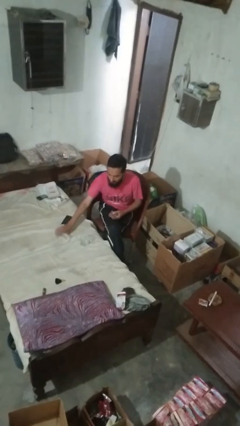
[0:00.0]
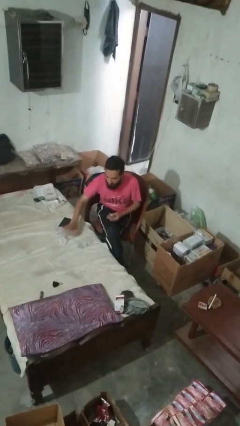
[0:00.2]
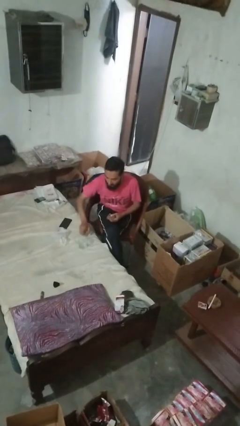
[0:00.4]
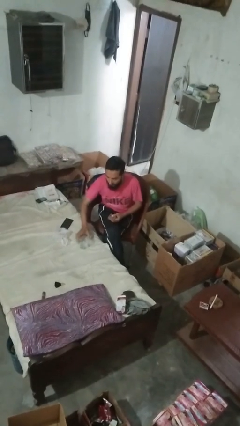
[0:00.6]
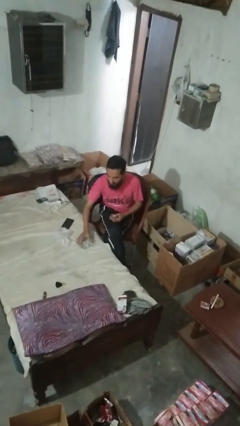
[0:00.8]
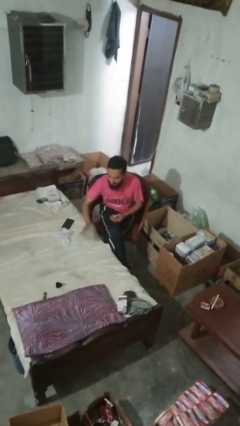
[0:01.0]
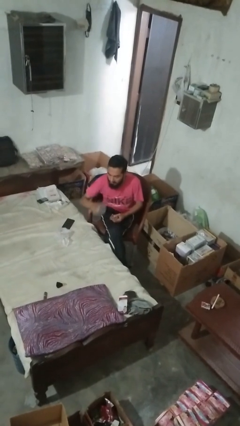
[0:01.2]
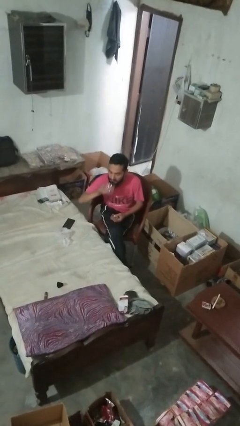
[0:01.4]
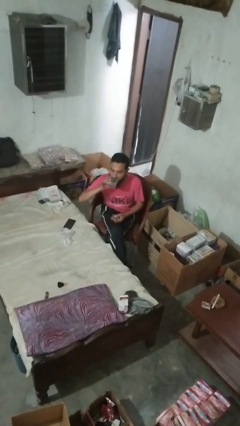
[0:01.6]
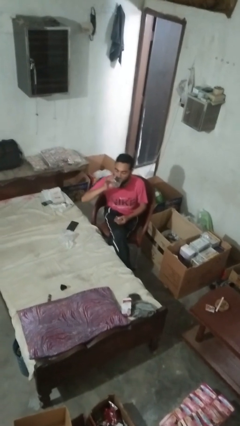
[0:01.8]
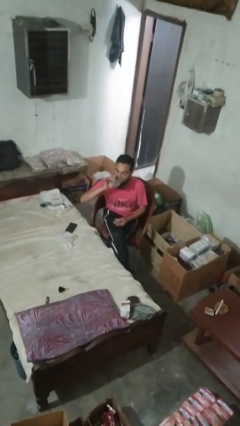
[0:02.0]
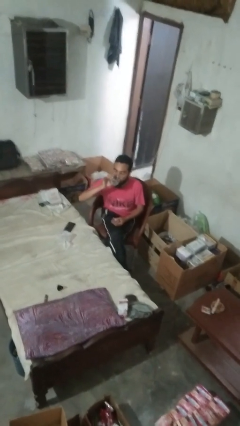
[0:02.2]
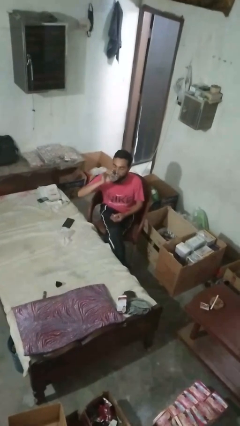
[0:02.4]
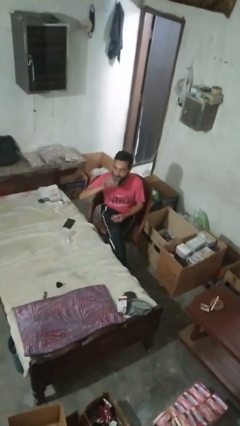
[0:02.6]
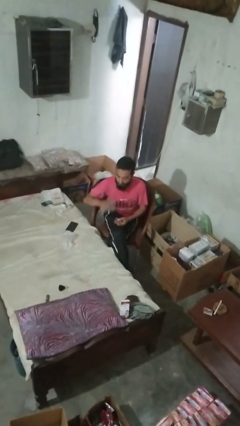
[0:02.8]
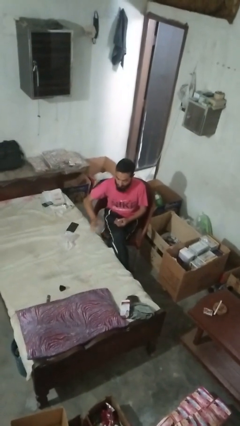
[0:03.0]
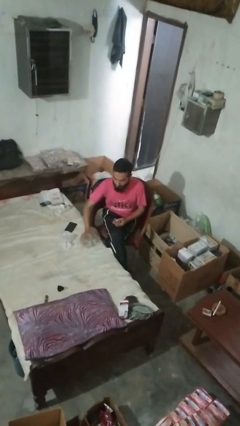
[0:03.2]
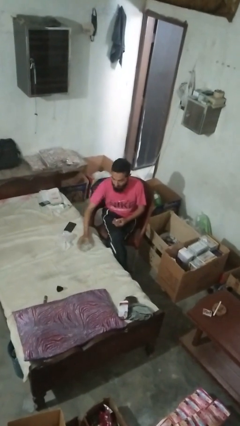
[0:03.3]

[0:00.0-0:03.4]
person drinks from cup

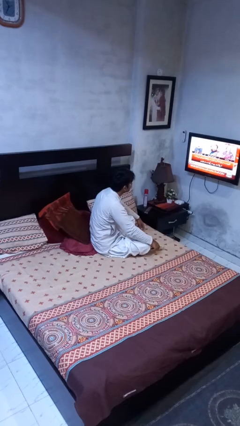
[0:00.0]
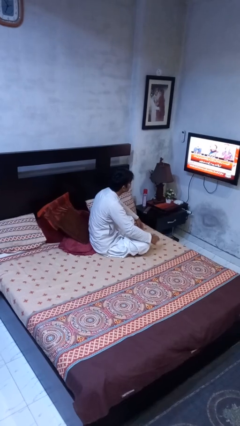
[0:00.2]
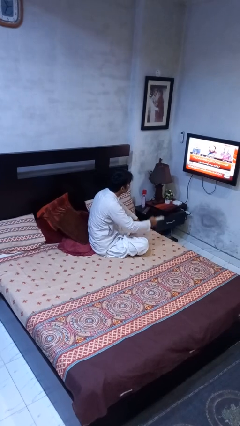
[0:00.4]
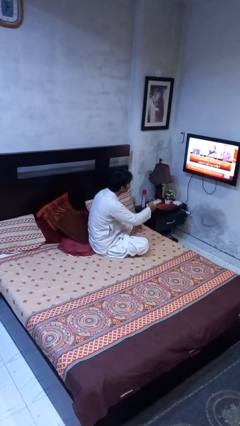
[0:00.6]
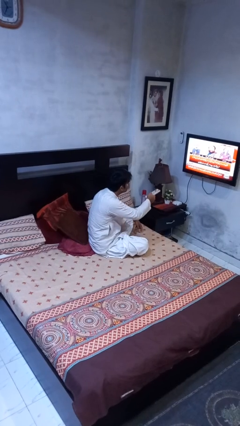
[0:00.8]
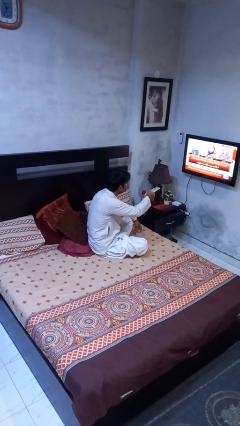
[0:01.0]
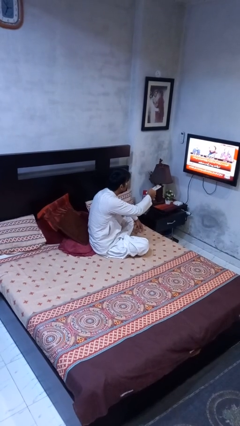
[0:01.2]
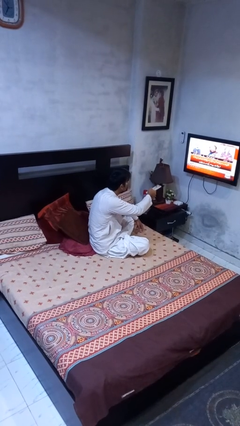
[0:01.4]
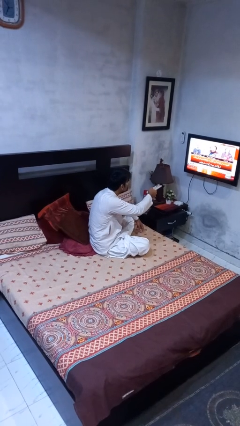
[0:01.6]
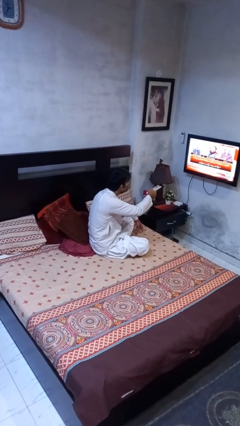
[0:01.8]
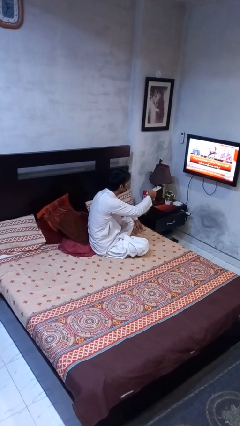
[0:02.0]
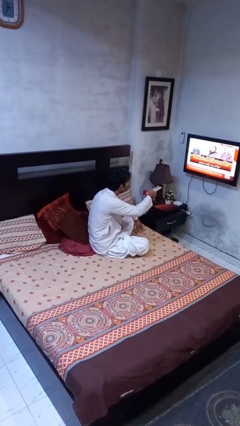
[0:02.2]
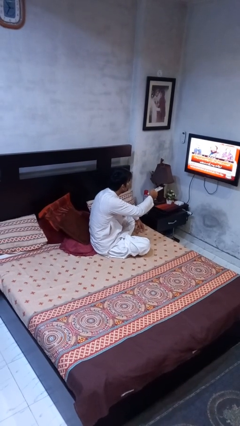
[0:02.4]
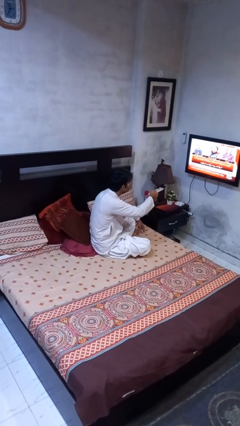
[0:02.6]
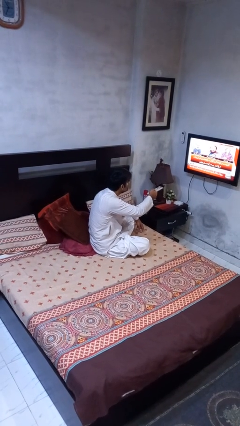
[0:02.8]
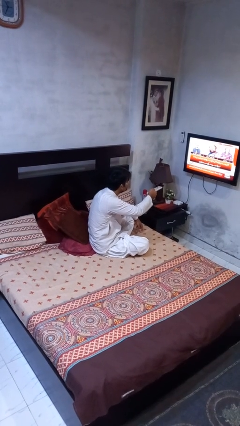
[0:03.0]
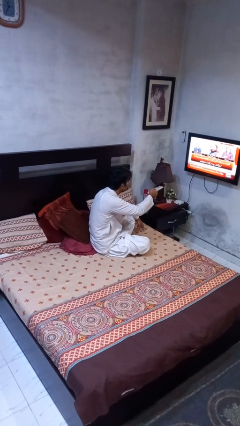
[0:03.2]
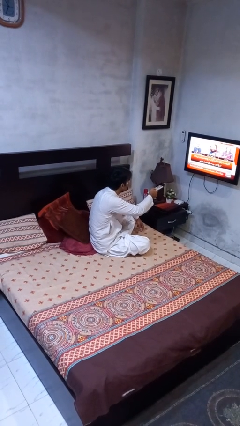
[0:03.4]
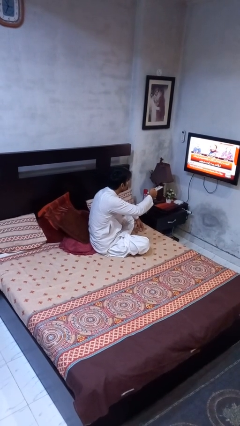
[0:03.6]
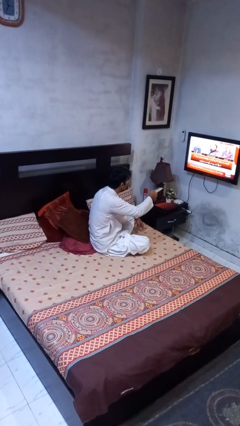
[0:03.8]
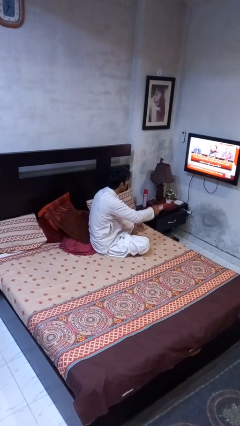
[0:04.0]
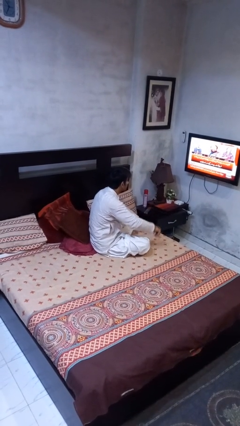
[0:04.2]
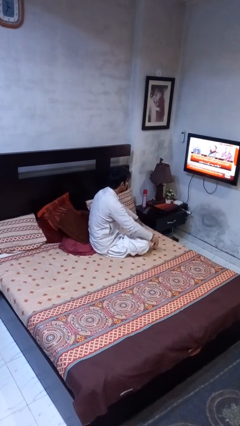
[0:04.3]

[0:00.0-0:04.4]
person uses television remote

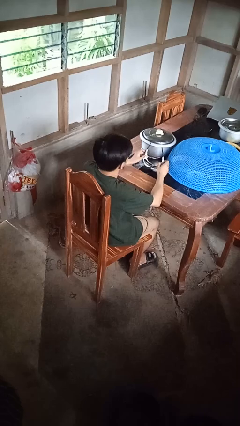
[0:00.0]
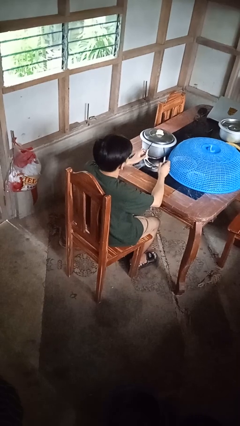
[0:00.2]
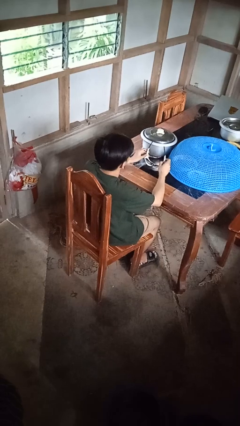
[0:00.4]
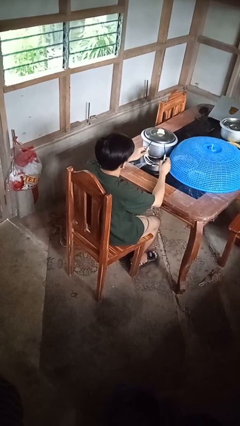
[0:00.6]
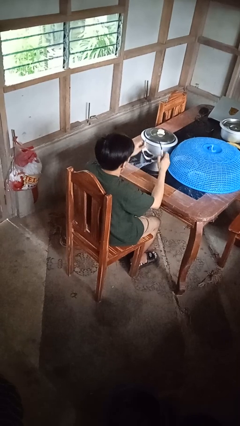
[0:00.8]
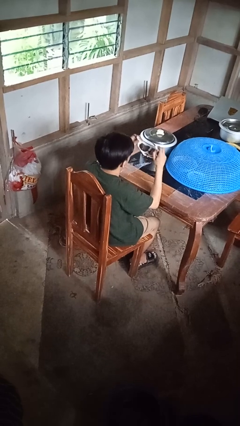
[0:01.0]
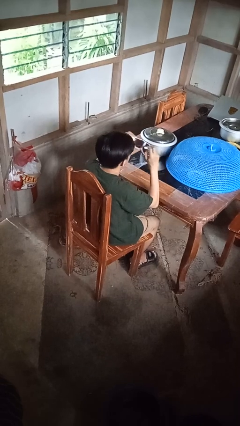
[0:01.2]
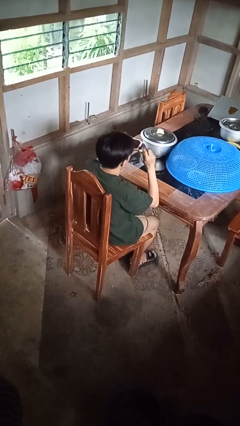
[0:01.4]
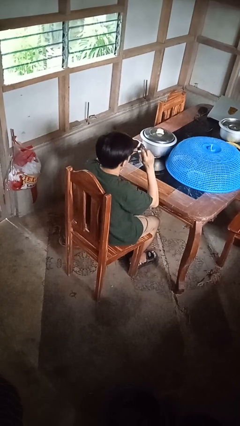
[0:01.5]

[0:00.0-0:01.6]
person puts on sunglasses

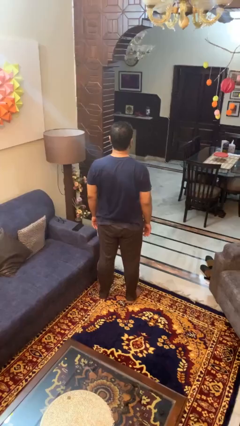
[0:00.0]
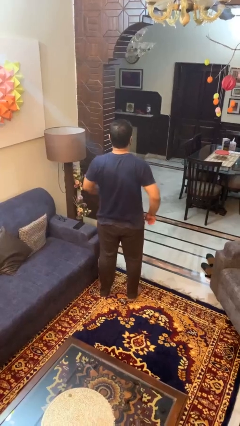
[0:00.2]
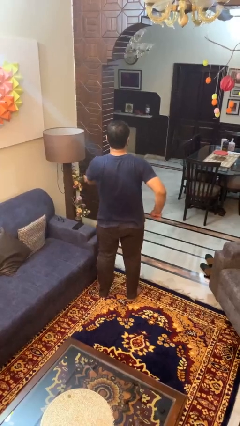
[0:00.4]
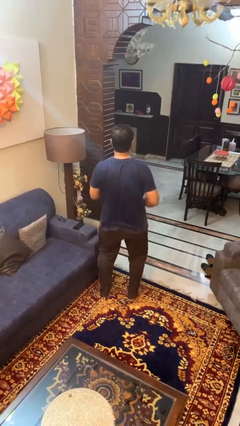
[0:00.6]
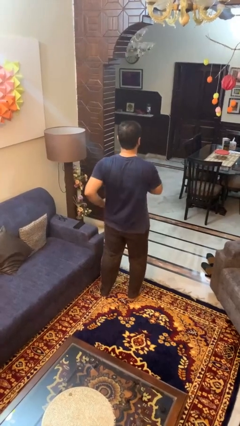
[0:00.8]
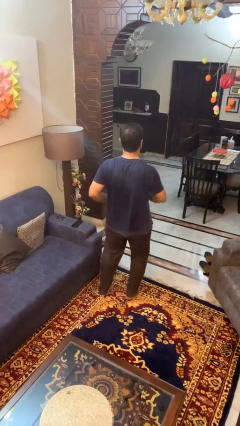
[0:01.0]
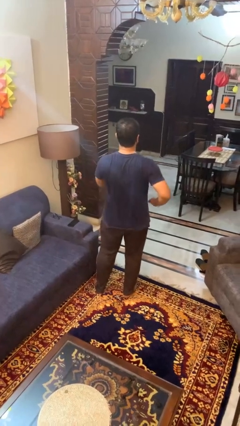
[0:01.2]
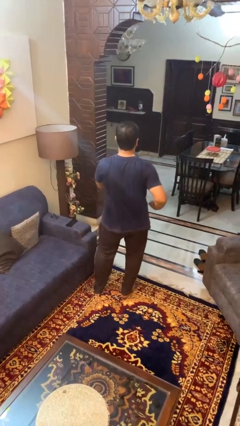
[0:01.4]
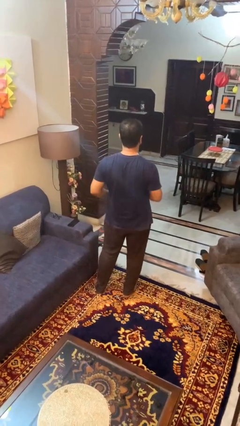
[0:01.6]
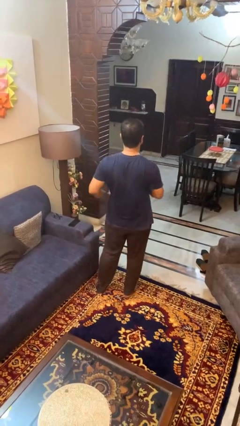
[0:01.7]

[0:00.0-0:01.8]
person dances in place

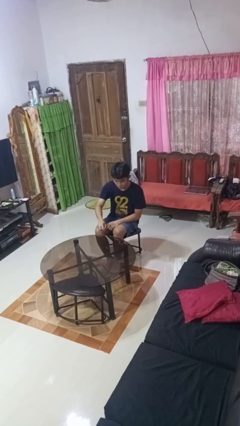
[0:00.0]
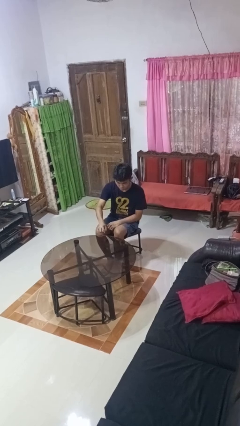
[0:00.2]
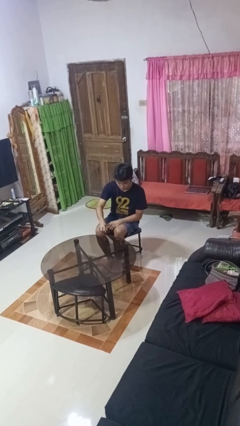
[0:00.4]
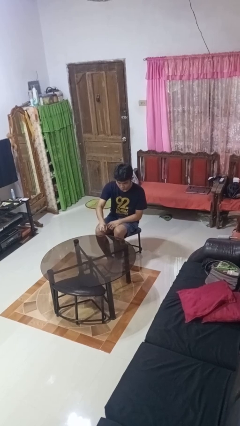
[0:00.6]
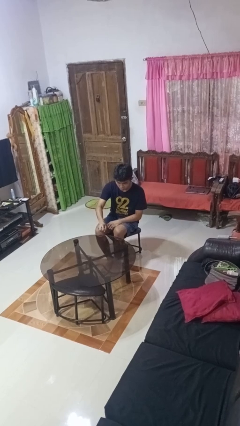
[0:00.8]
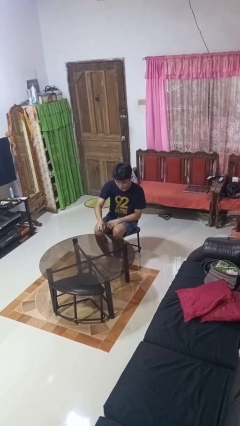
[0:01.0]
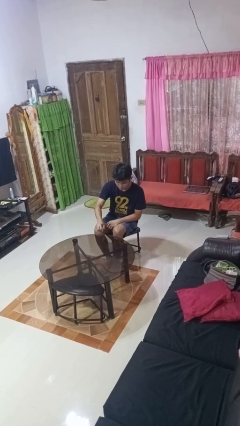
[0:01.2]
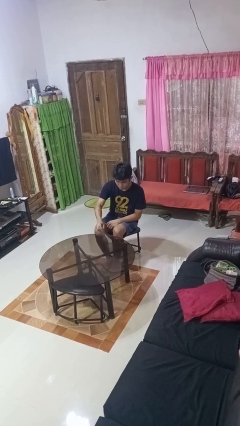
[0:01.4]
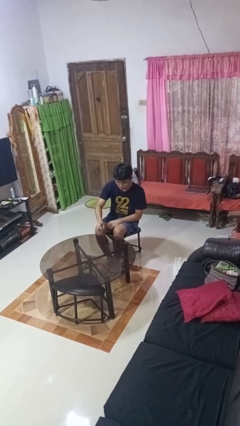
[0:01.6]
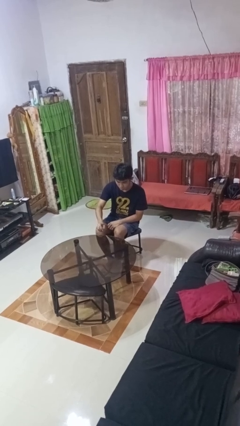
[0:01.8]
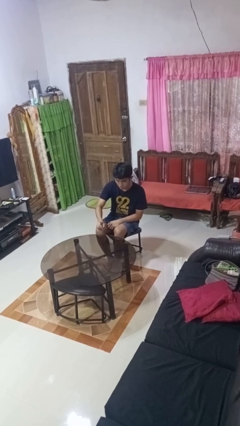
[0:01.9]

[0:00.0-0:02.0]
person sprays from bottle

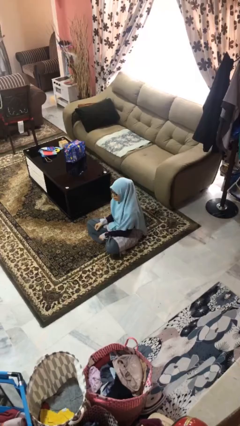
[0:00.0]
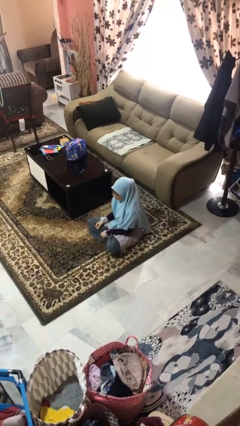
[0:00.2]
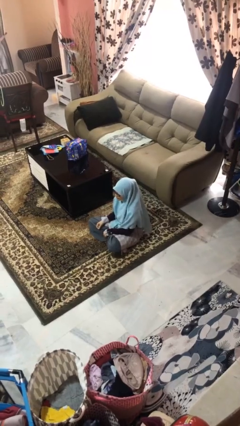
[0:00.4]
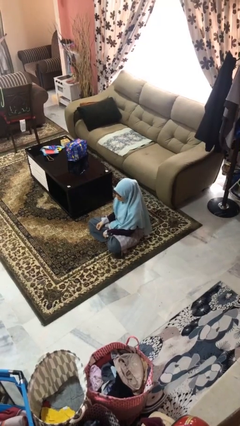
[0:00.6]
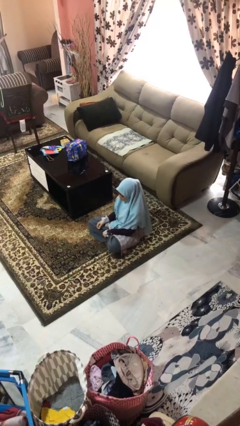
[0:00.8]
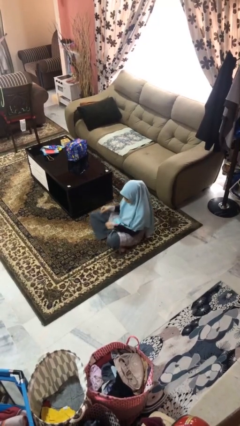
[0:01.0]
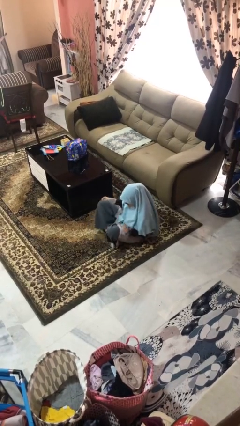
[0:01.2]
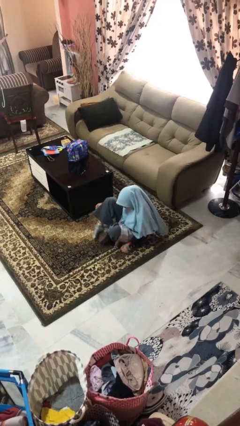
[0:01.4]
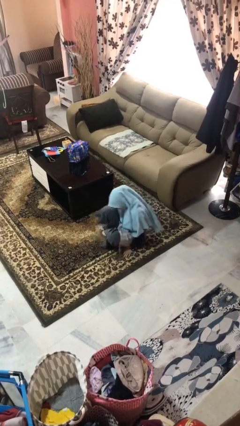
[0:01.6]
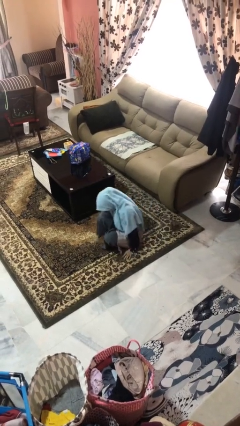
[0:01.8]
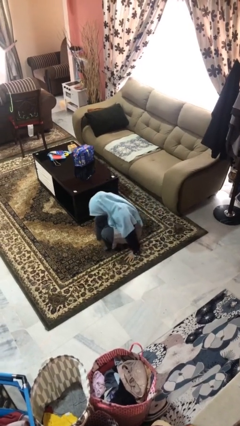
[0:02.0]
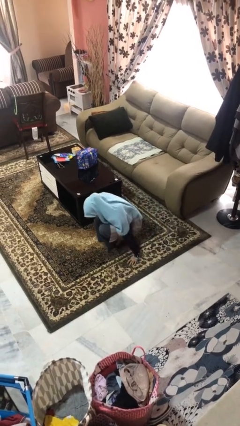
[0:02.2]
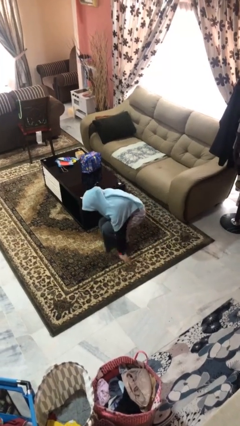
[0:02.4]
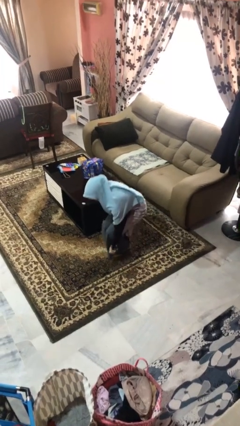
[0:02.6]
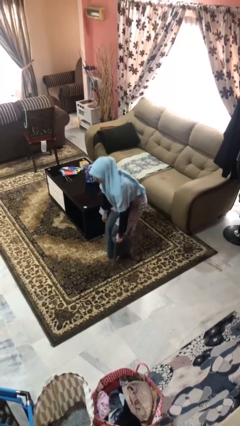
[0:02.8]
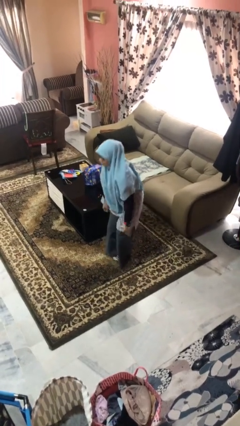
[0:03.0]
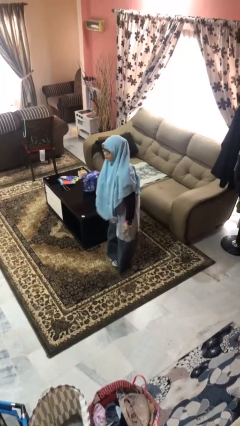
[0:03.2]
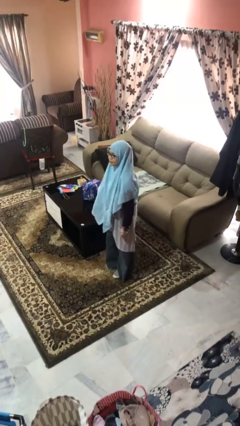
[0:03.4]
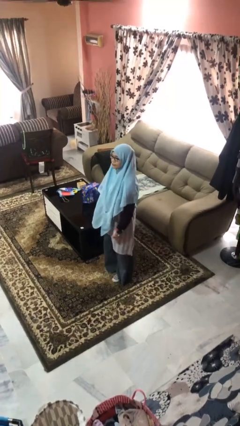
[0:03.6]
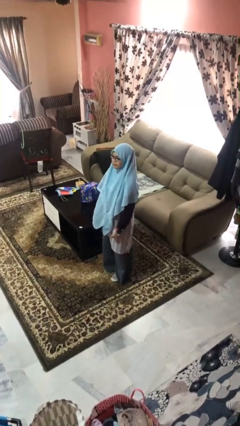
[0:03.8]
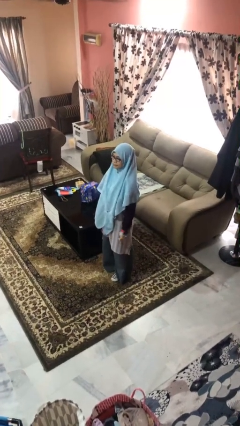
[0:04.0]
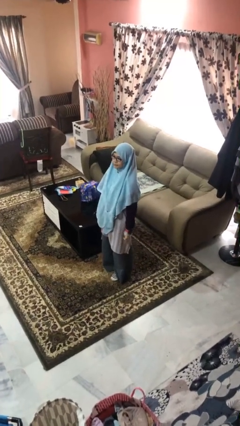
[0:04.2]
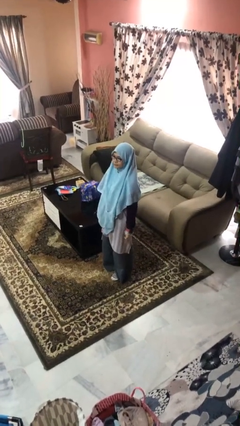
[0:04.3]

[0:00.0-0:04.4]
person stands up from floor
